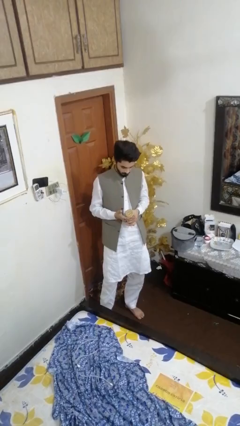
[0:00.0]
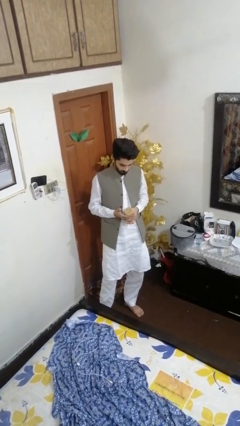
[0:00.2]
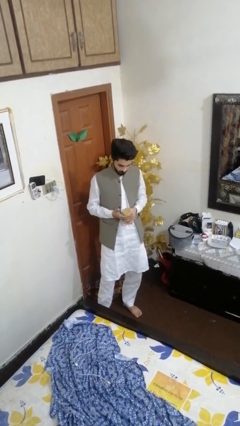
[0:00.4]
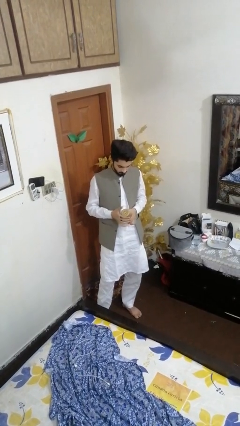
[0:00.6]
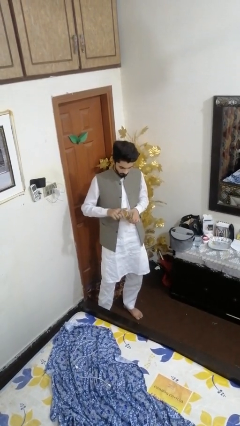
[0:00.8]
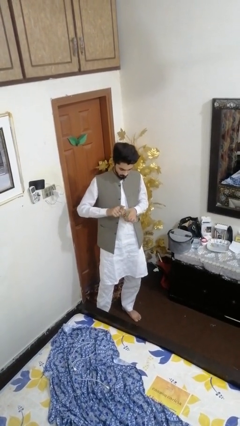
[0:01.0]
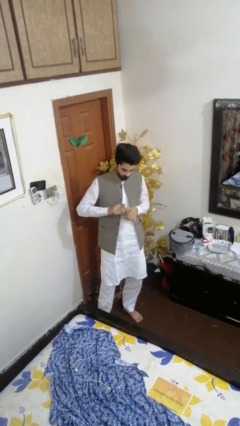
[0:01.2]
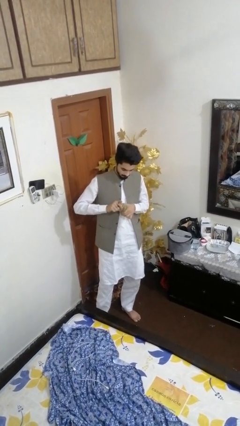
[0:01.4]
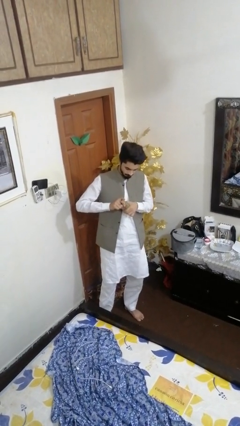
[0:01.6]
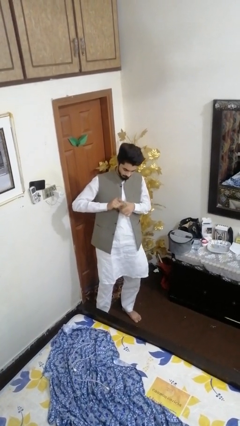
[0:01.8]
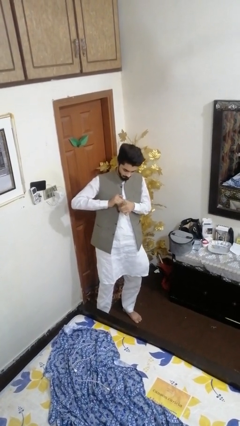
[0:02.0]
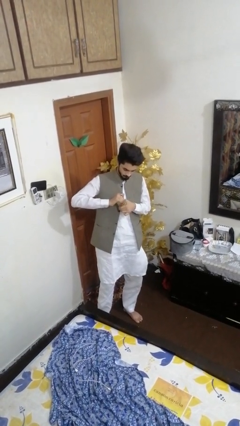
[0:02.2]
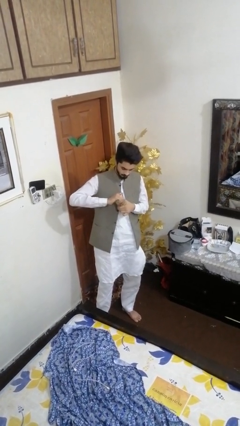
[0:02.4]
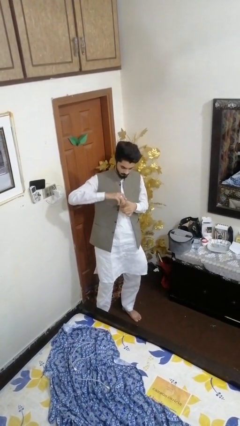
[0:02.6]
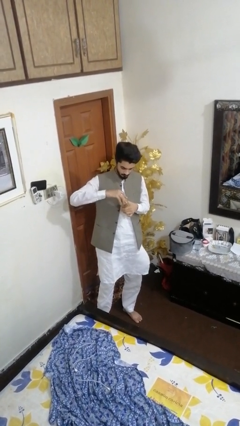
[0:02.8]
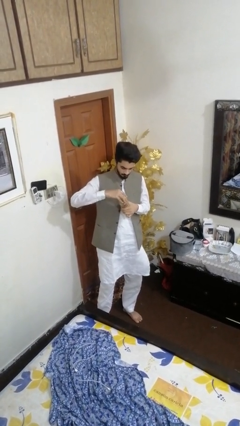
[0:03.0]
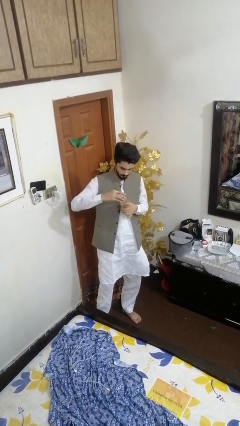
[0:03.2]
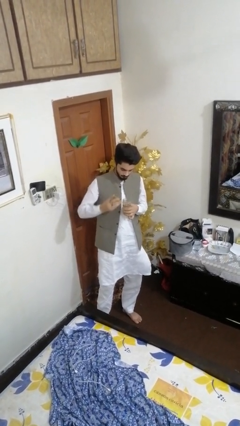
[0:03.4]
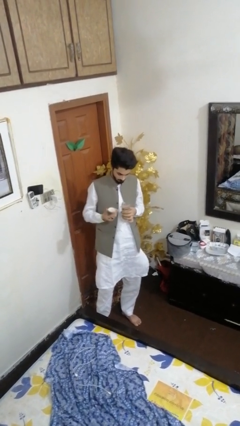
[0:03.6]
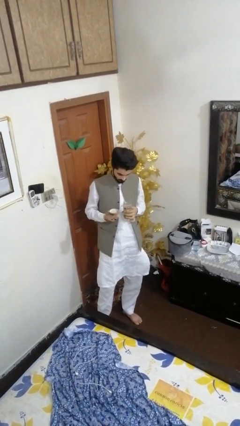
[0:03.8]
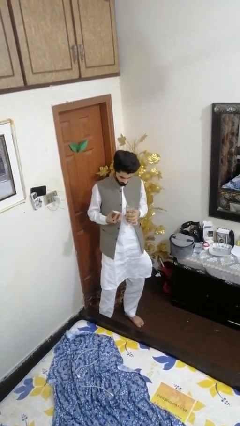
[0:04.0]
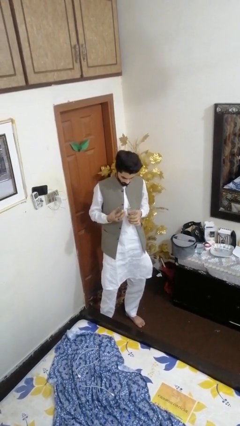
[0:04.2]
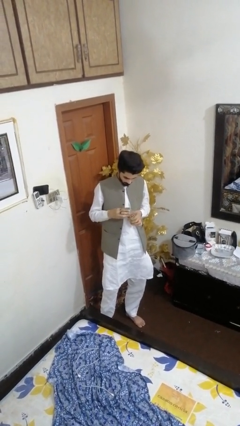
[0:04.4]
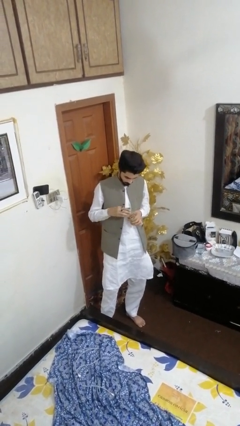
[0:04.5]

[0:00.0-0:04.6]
person opens jar

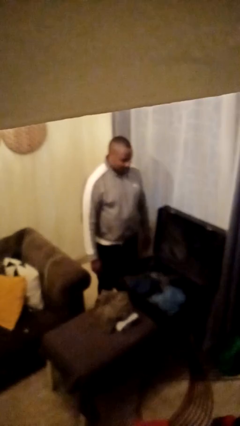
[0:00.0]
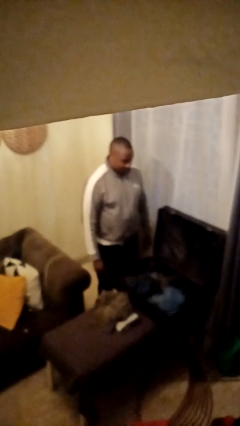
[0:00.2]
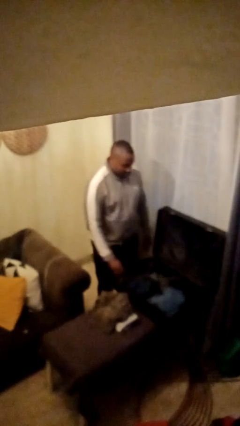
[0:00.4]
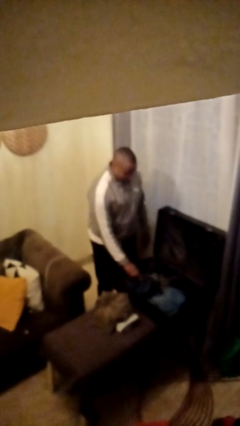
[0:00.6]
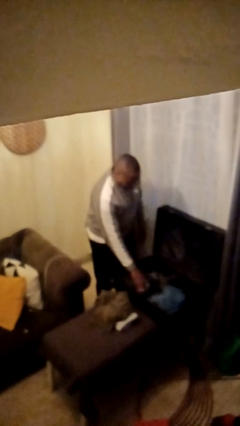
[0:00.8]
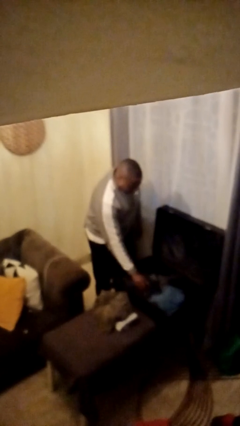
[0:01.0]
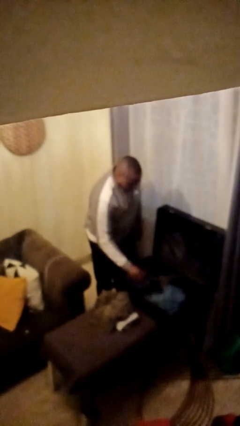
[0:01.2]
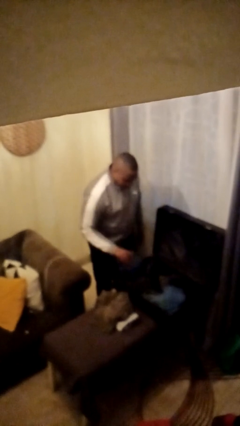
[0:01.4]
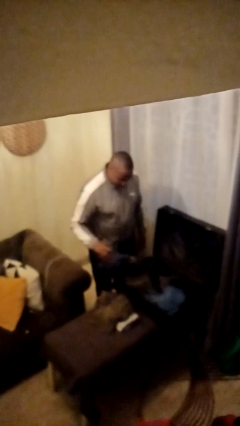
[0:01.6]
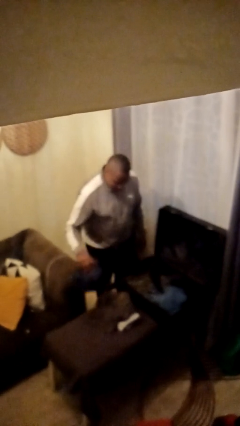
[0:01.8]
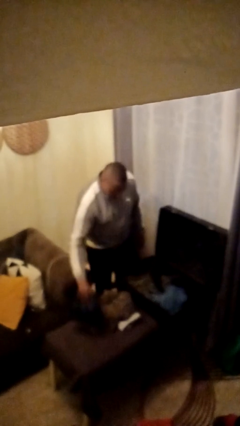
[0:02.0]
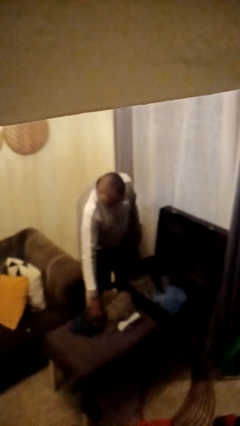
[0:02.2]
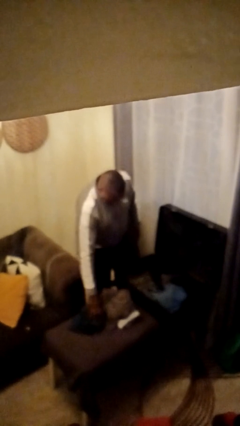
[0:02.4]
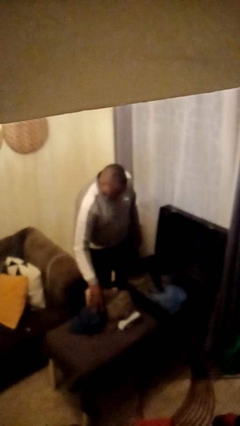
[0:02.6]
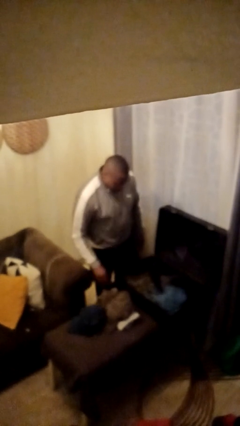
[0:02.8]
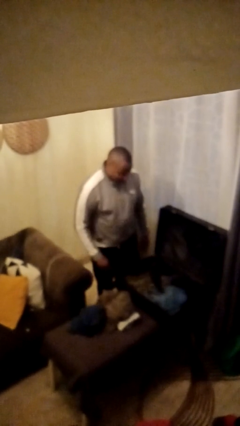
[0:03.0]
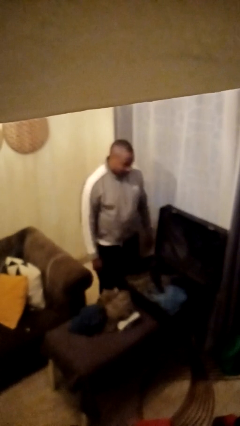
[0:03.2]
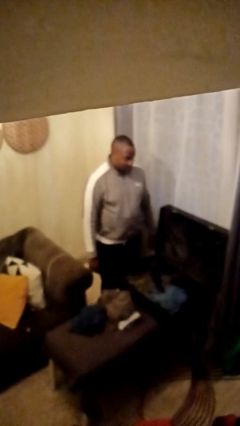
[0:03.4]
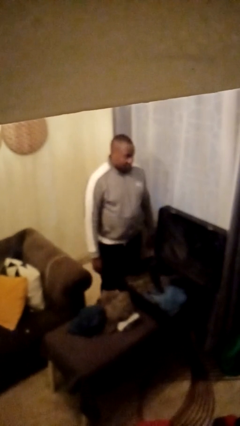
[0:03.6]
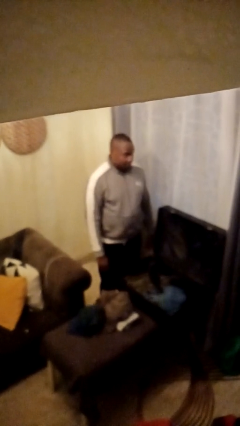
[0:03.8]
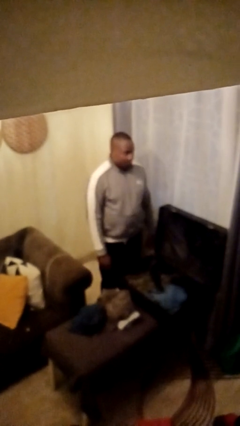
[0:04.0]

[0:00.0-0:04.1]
person unloads clothes from suitcase

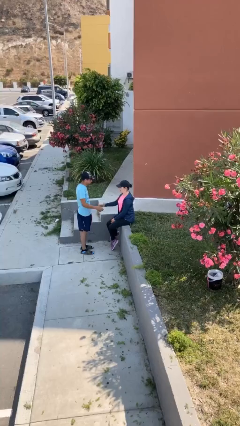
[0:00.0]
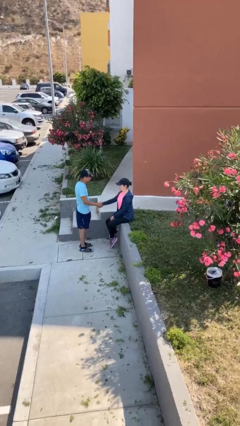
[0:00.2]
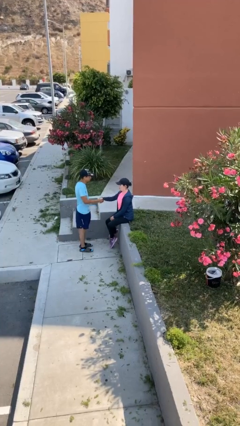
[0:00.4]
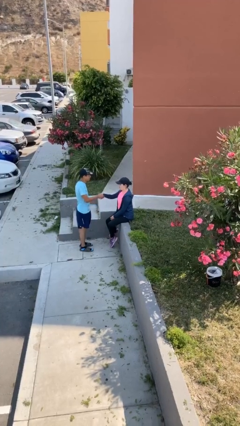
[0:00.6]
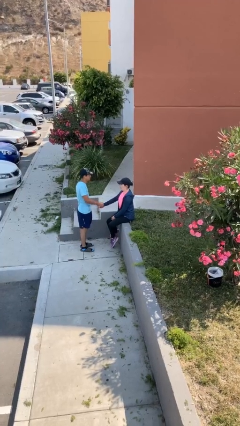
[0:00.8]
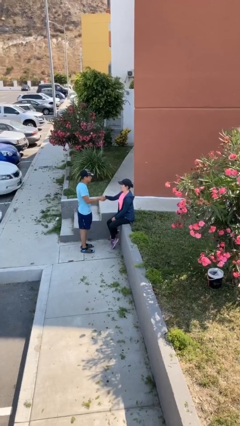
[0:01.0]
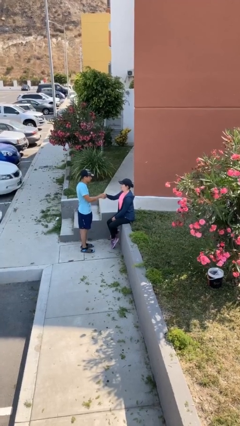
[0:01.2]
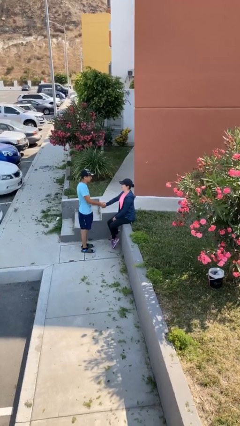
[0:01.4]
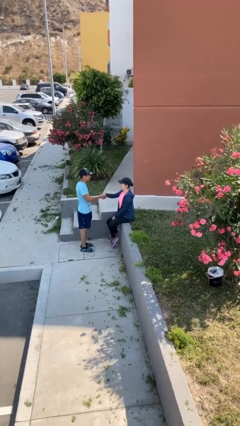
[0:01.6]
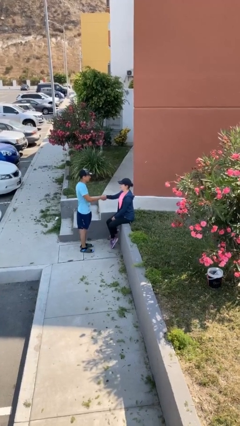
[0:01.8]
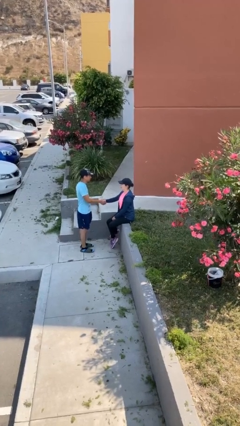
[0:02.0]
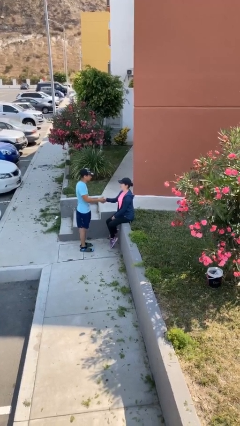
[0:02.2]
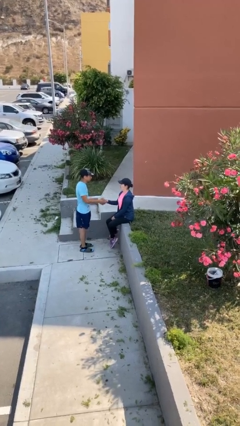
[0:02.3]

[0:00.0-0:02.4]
person shakes hand

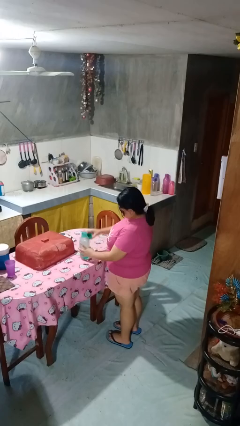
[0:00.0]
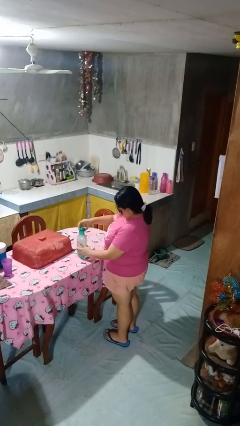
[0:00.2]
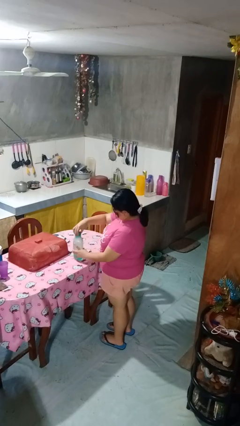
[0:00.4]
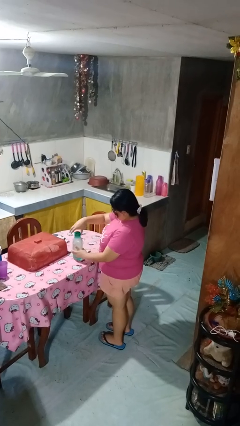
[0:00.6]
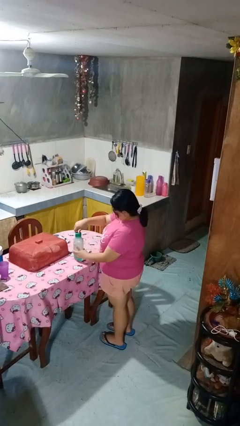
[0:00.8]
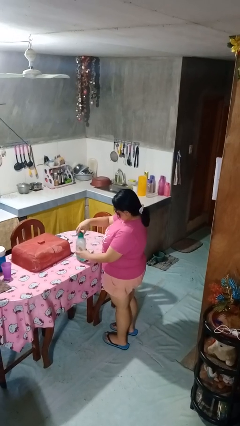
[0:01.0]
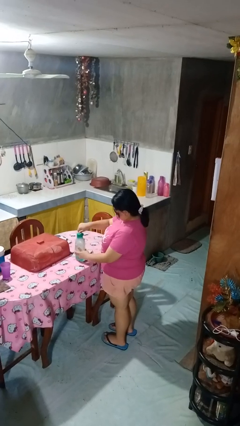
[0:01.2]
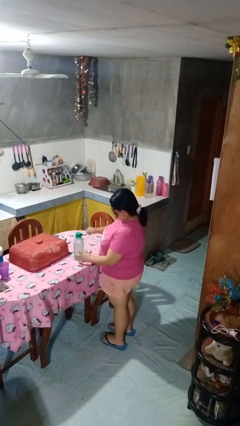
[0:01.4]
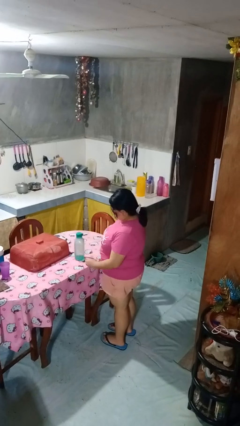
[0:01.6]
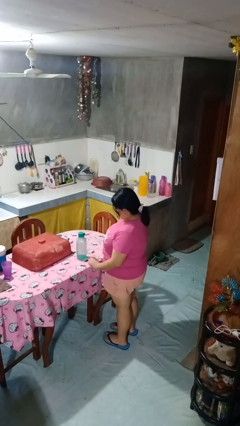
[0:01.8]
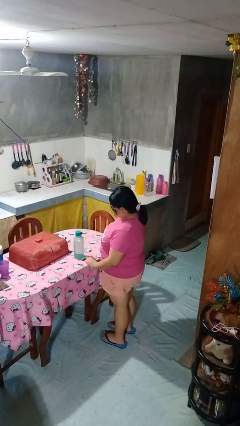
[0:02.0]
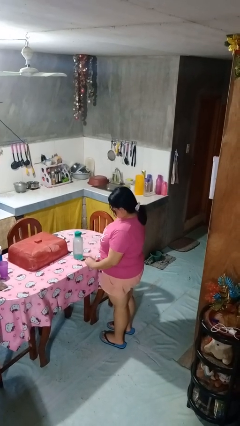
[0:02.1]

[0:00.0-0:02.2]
person screws lid to bottle

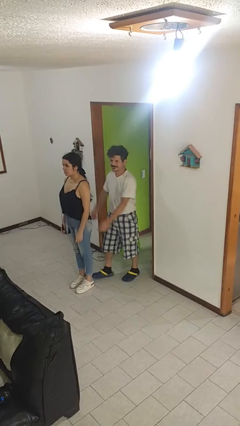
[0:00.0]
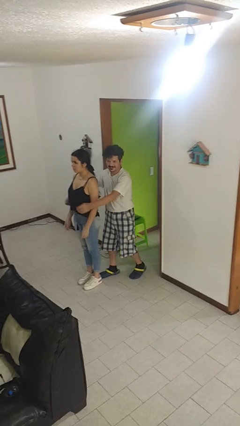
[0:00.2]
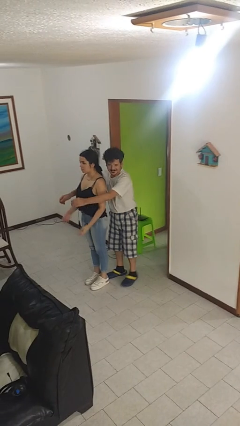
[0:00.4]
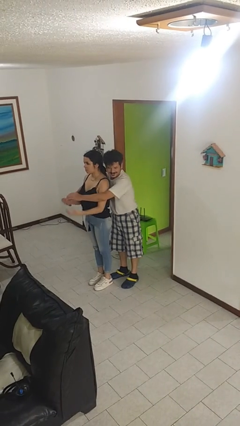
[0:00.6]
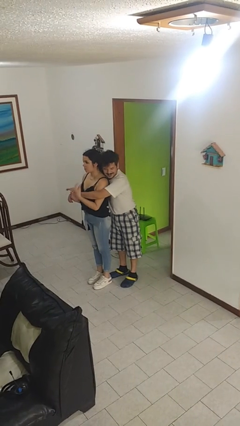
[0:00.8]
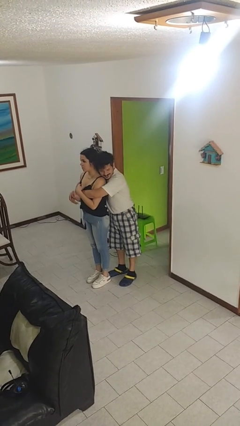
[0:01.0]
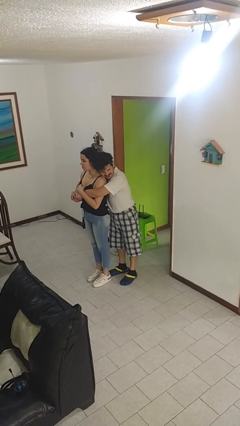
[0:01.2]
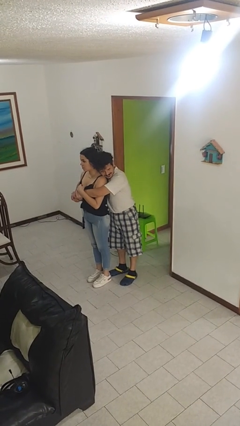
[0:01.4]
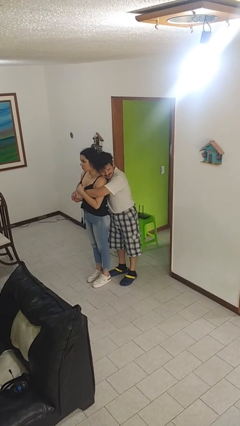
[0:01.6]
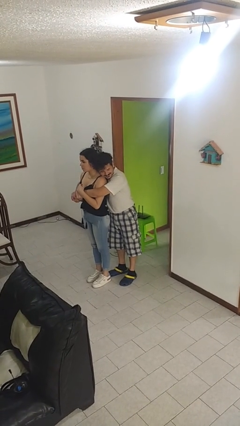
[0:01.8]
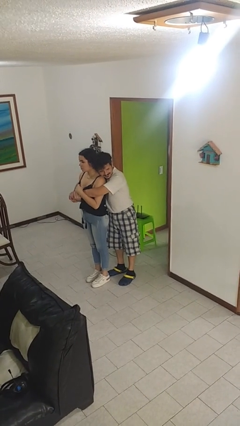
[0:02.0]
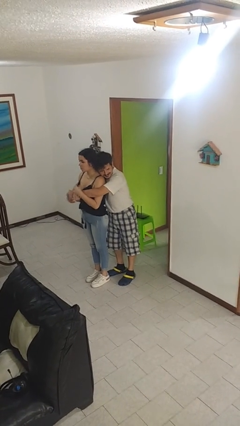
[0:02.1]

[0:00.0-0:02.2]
person hugs person from behind

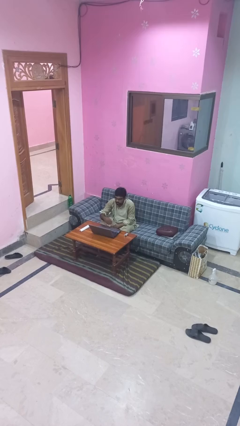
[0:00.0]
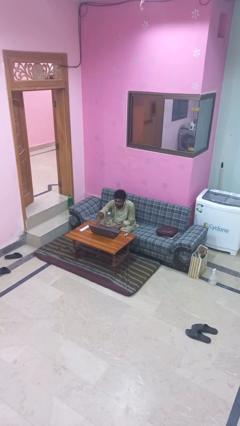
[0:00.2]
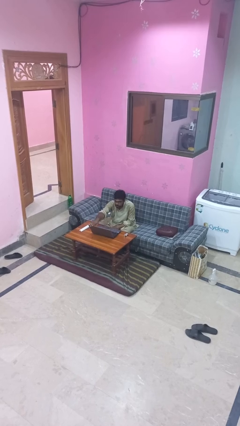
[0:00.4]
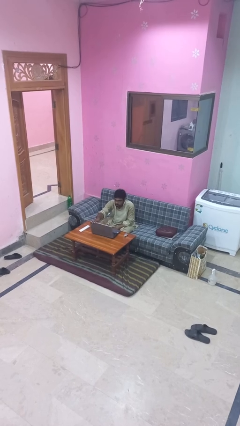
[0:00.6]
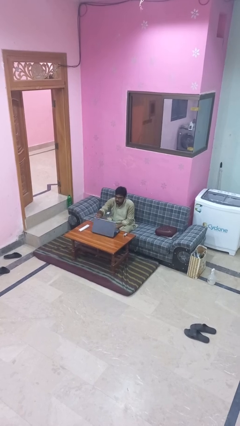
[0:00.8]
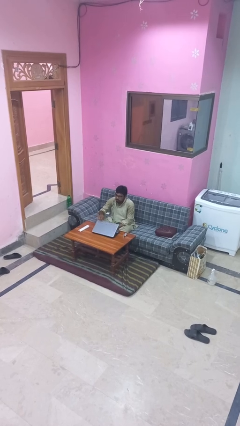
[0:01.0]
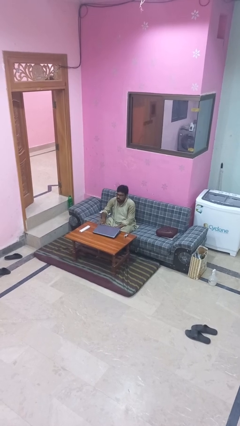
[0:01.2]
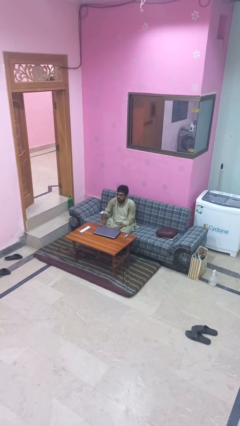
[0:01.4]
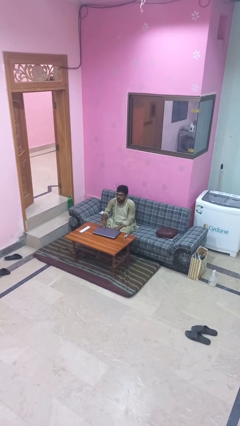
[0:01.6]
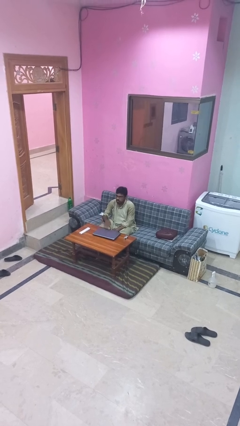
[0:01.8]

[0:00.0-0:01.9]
person closes laptop

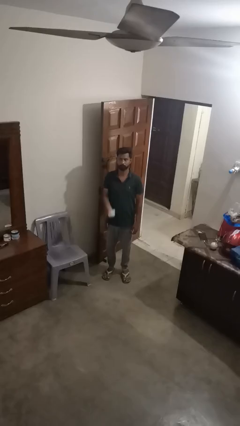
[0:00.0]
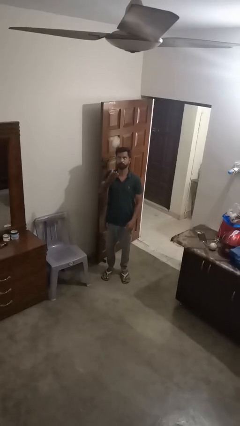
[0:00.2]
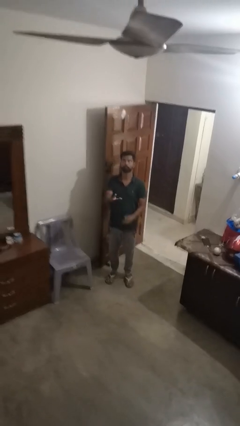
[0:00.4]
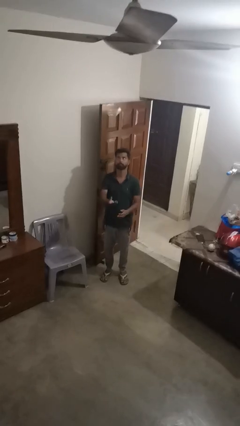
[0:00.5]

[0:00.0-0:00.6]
person drops object
